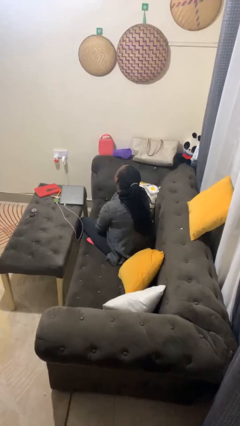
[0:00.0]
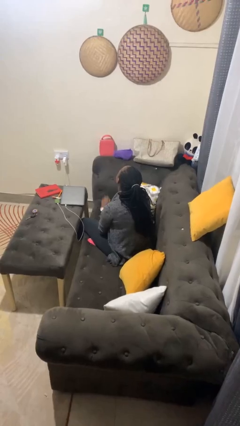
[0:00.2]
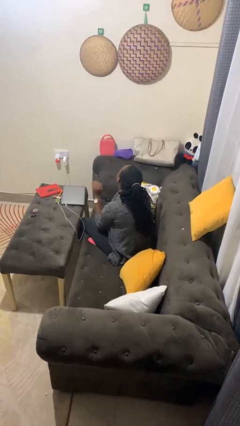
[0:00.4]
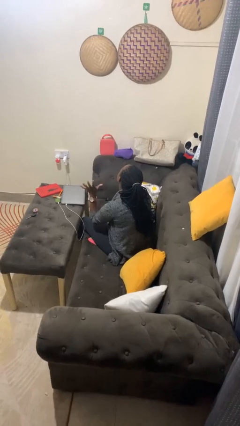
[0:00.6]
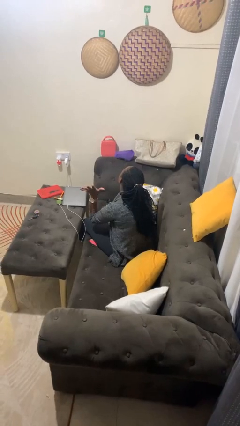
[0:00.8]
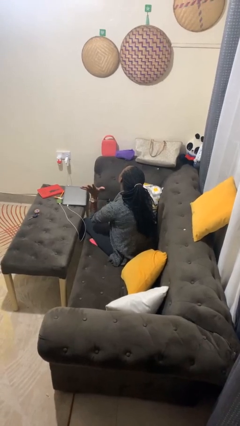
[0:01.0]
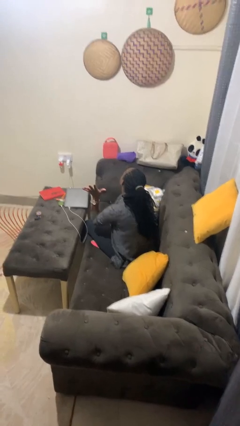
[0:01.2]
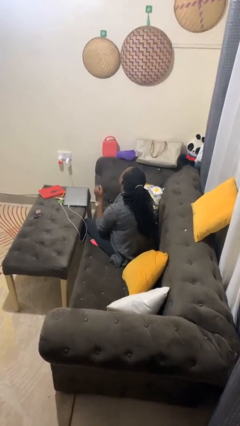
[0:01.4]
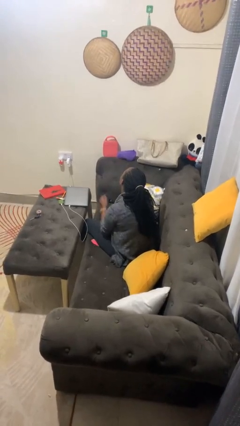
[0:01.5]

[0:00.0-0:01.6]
person gestures number five

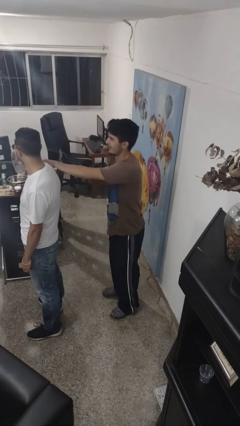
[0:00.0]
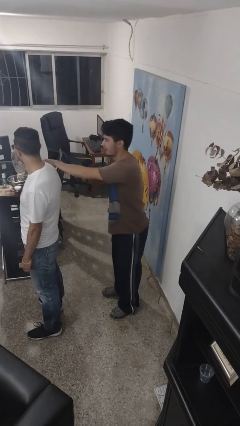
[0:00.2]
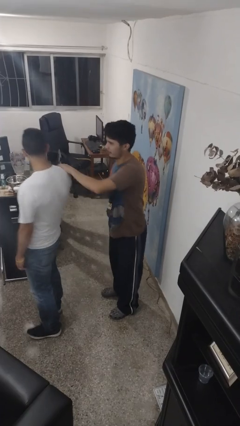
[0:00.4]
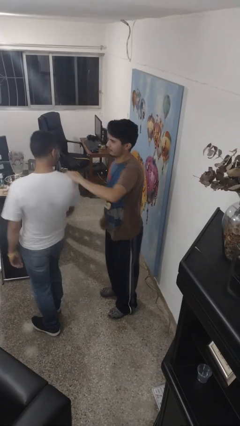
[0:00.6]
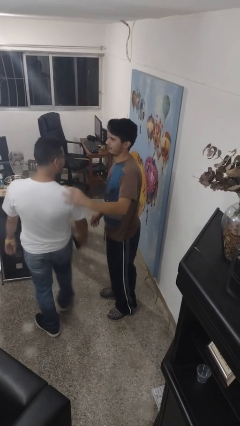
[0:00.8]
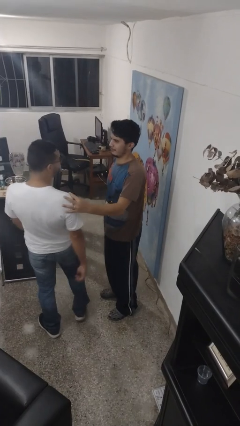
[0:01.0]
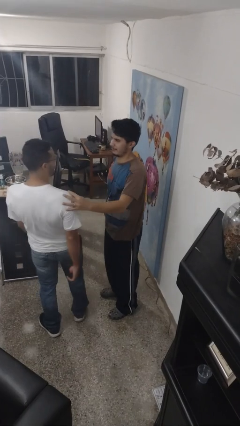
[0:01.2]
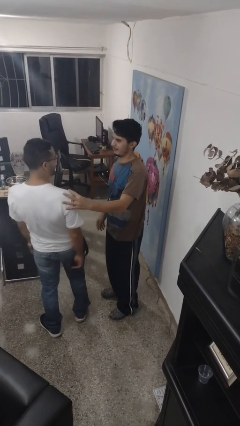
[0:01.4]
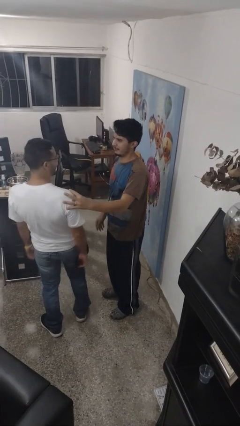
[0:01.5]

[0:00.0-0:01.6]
person spins person around

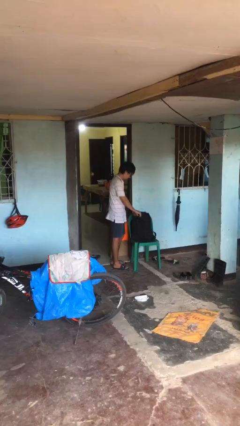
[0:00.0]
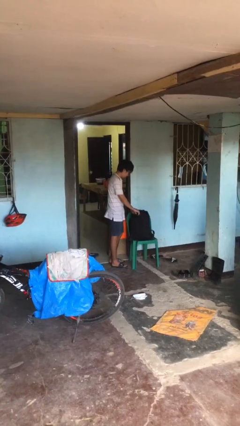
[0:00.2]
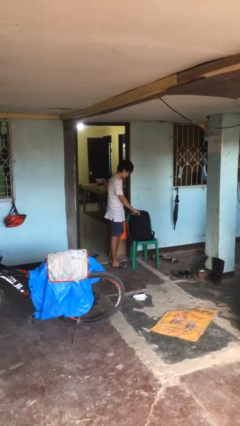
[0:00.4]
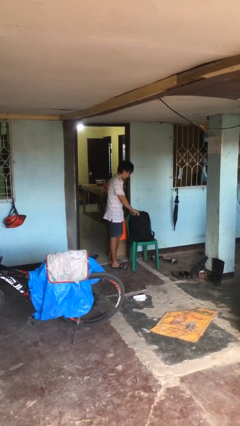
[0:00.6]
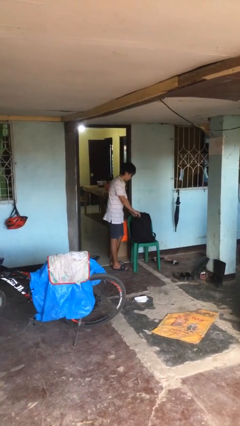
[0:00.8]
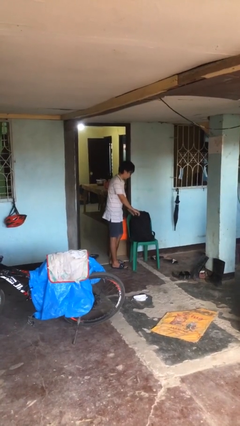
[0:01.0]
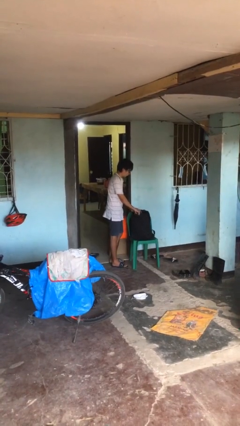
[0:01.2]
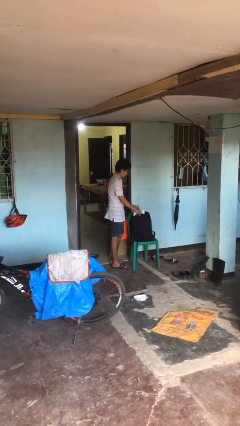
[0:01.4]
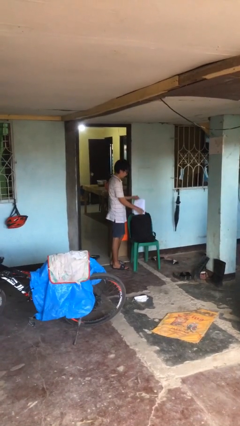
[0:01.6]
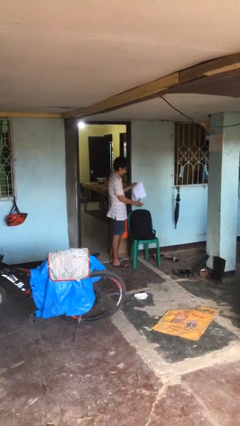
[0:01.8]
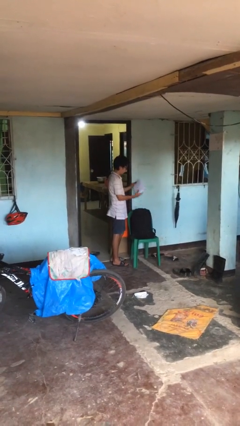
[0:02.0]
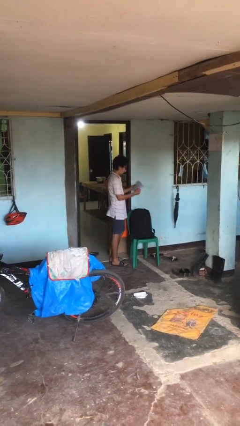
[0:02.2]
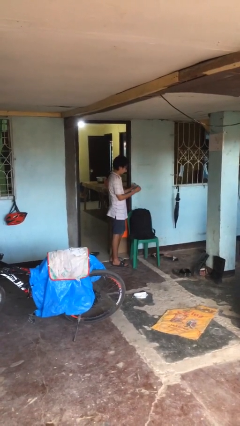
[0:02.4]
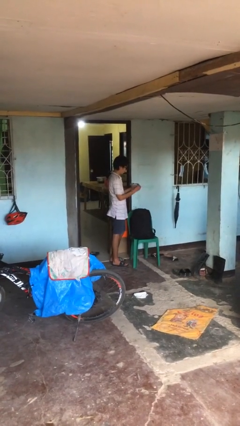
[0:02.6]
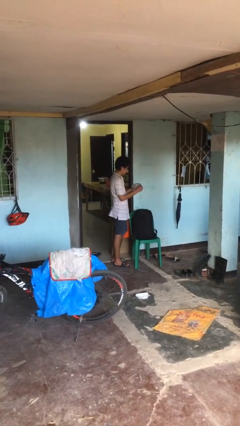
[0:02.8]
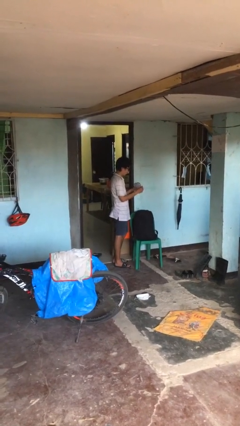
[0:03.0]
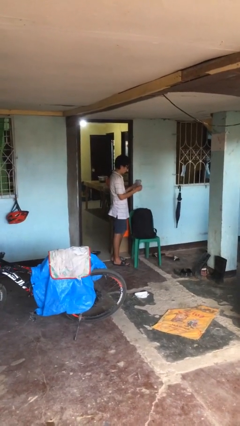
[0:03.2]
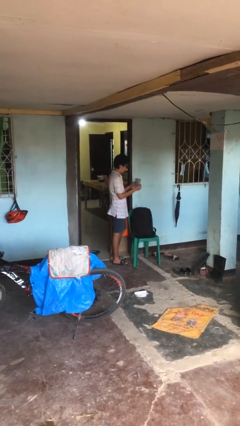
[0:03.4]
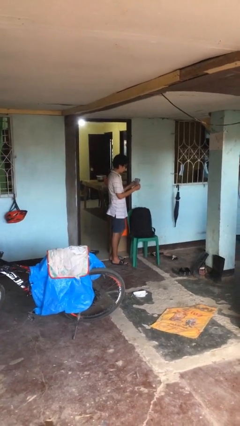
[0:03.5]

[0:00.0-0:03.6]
person takes object from backpack

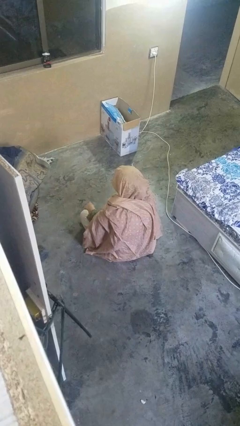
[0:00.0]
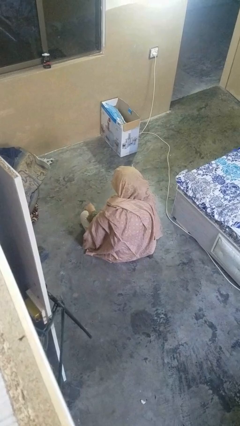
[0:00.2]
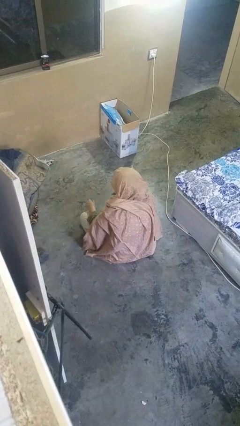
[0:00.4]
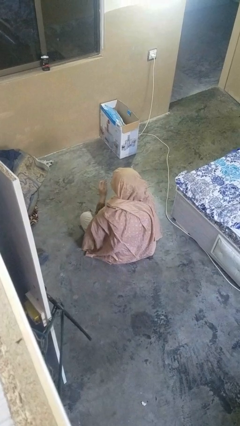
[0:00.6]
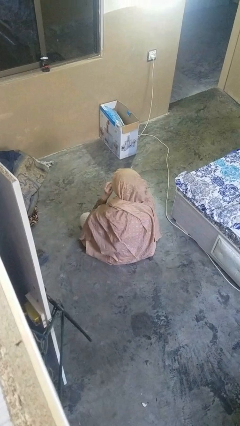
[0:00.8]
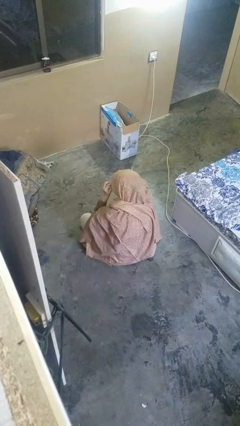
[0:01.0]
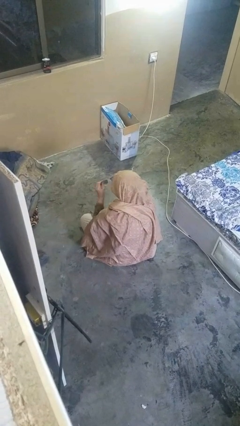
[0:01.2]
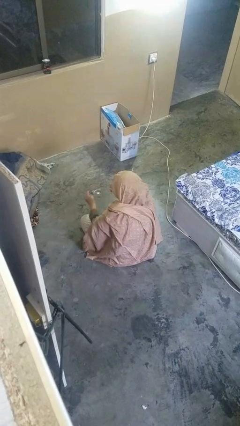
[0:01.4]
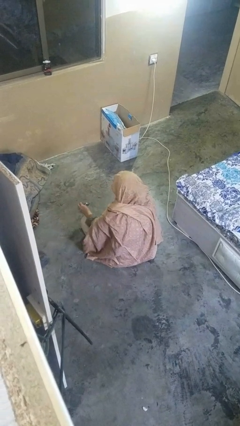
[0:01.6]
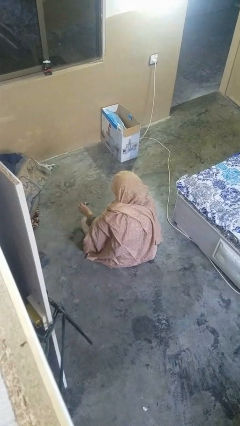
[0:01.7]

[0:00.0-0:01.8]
person takes off glasses

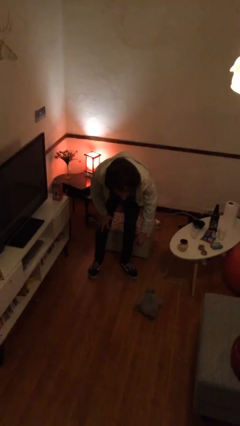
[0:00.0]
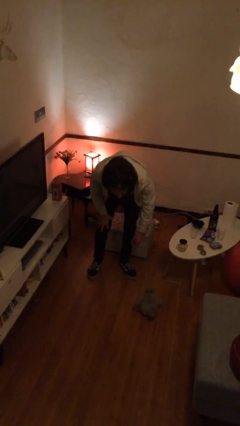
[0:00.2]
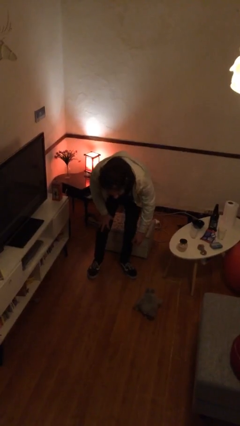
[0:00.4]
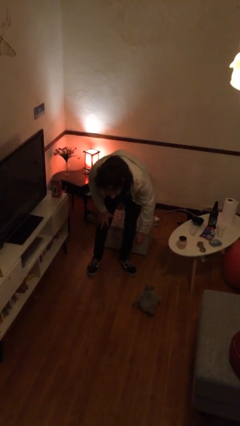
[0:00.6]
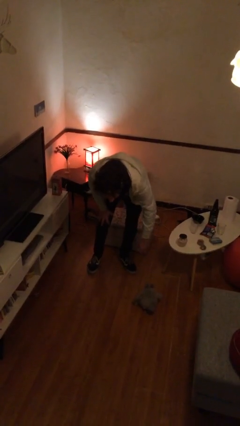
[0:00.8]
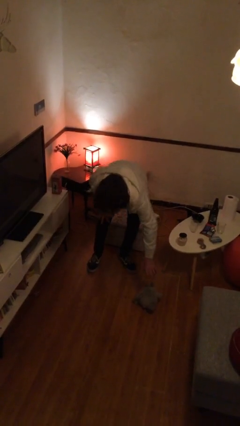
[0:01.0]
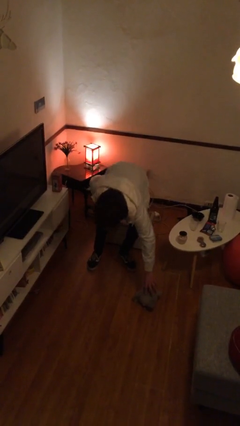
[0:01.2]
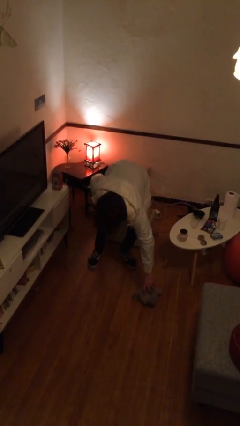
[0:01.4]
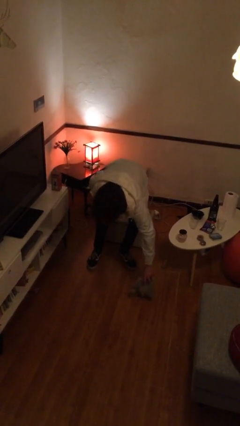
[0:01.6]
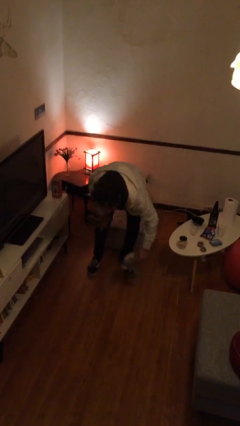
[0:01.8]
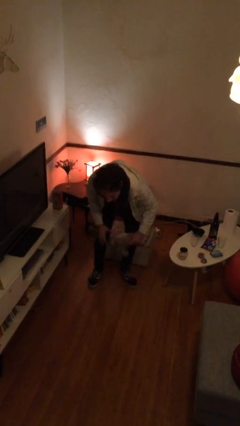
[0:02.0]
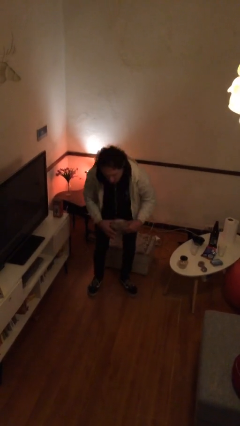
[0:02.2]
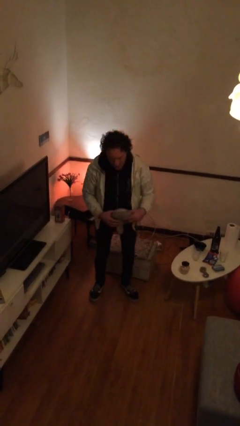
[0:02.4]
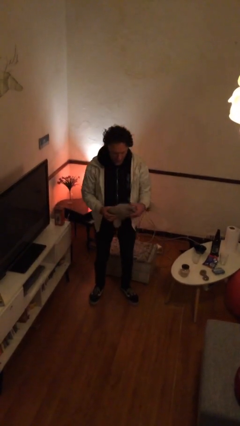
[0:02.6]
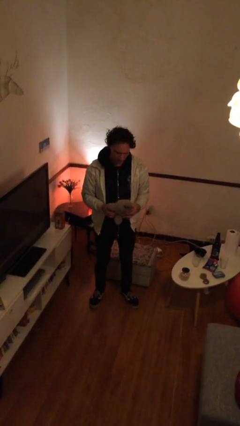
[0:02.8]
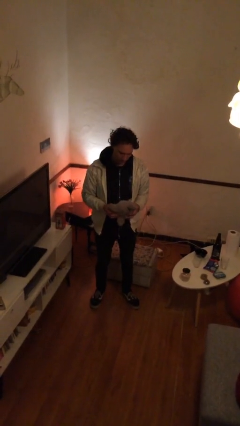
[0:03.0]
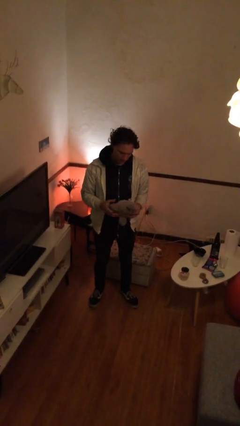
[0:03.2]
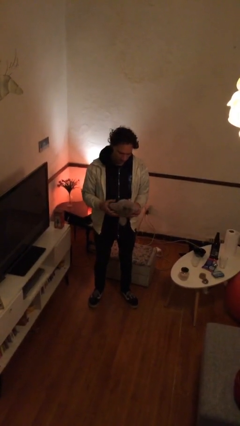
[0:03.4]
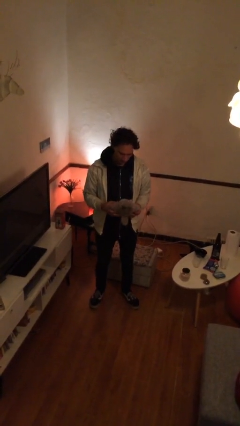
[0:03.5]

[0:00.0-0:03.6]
person picks up object from floor

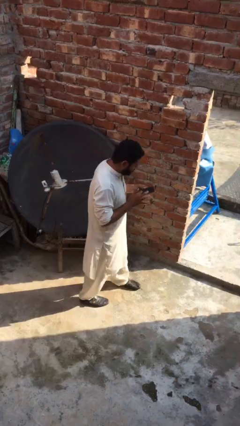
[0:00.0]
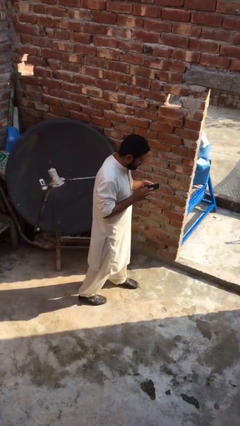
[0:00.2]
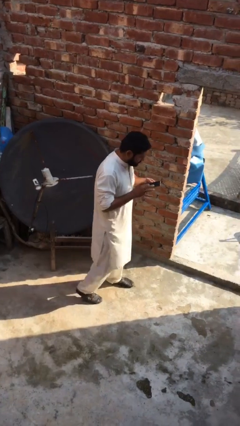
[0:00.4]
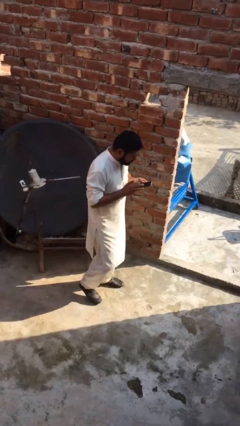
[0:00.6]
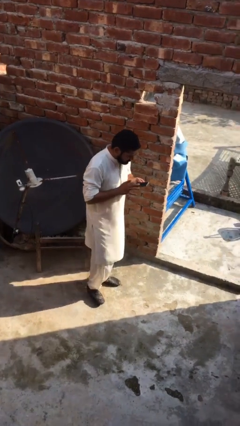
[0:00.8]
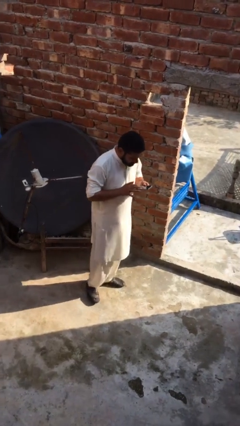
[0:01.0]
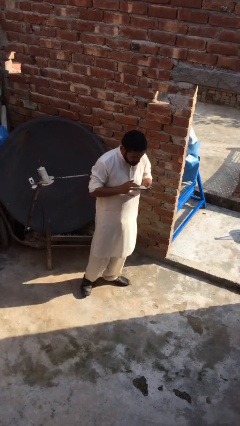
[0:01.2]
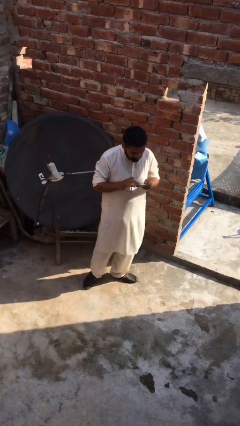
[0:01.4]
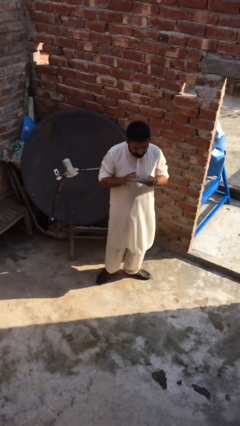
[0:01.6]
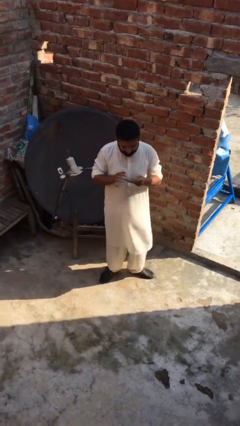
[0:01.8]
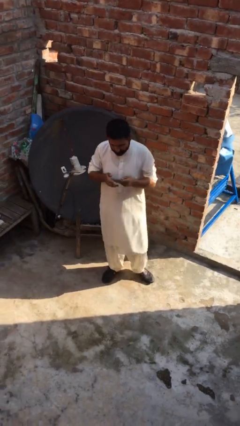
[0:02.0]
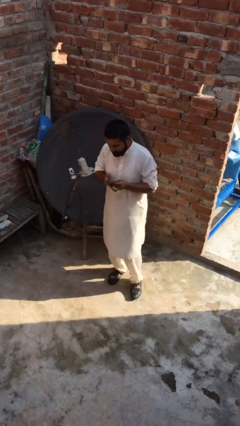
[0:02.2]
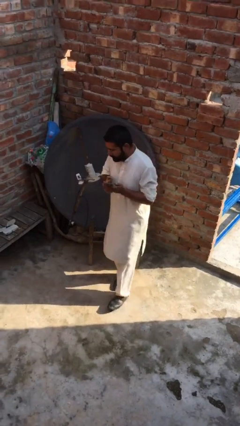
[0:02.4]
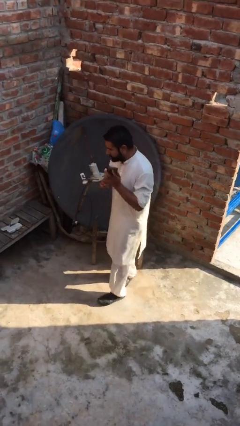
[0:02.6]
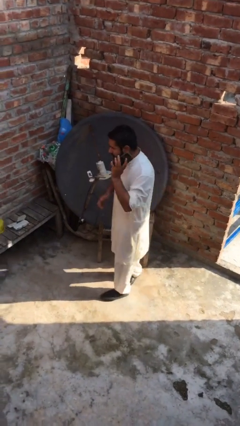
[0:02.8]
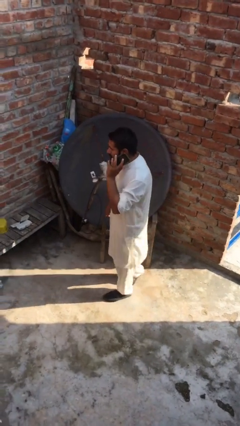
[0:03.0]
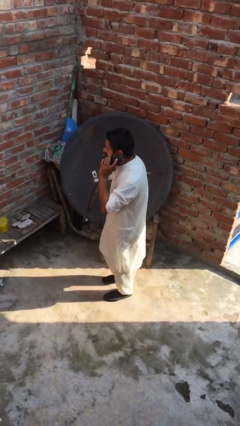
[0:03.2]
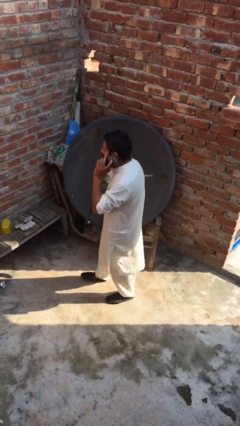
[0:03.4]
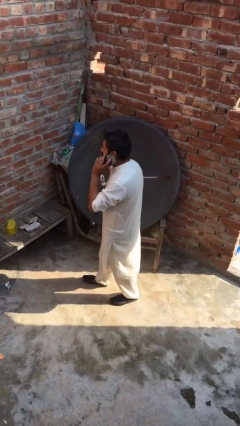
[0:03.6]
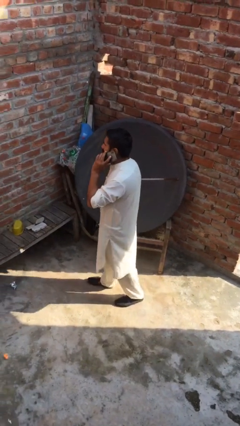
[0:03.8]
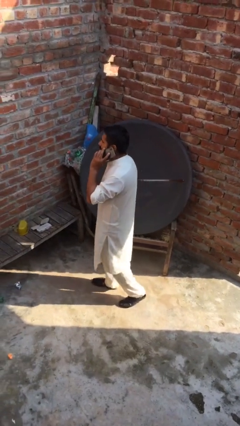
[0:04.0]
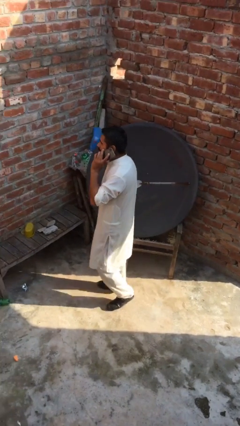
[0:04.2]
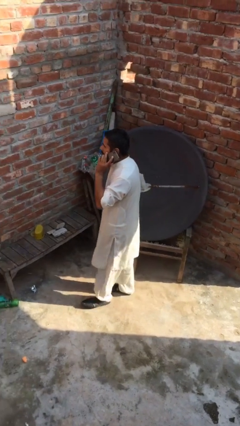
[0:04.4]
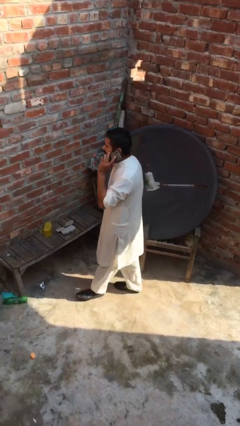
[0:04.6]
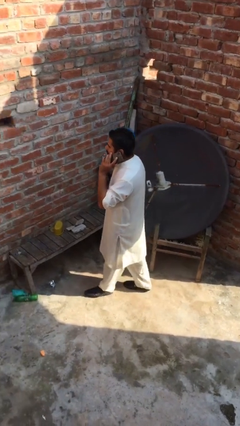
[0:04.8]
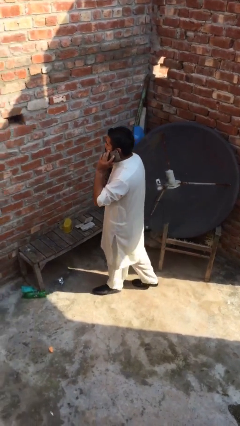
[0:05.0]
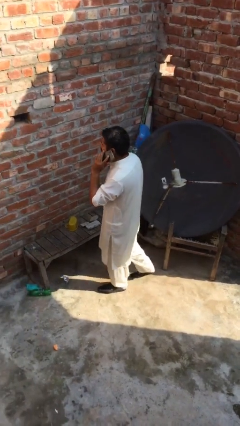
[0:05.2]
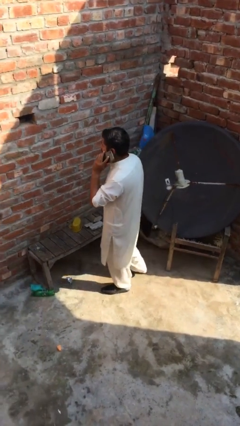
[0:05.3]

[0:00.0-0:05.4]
person talks on phone
